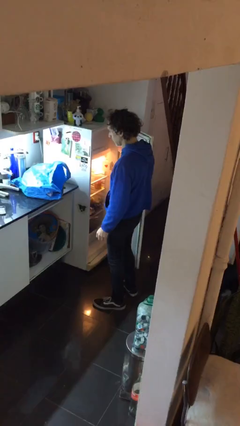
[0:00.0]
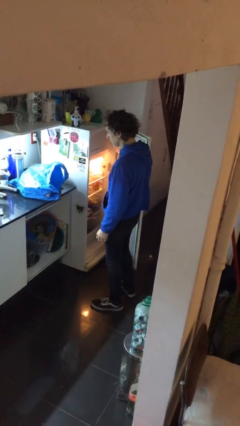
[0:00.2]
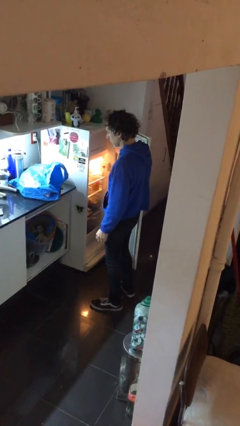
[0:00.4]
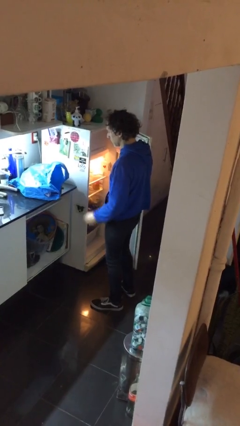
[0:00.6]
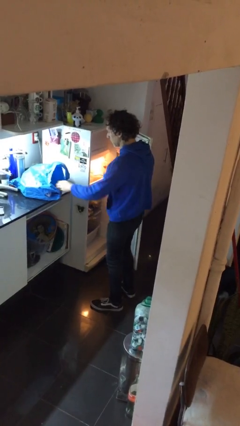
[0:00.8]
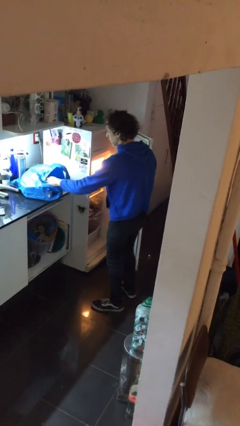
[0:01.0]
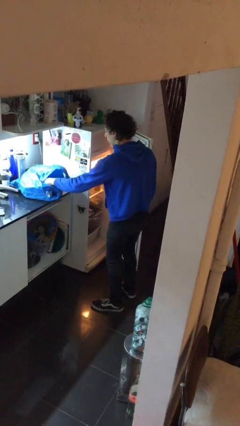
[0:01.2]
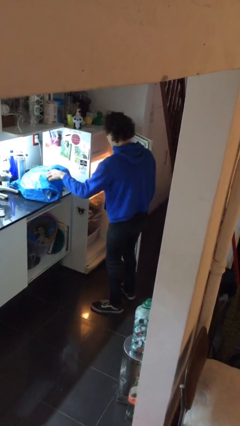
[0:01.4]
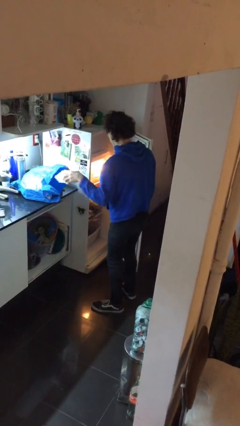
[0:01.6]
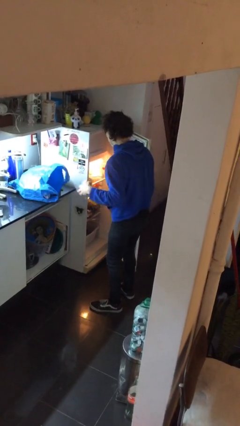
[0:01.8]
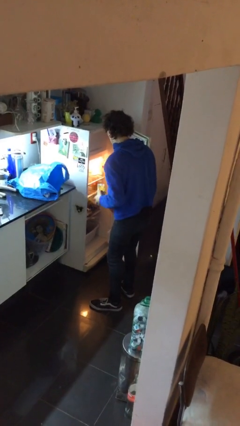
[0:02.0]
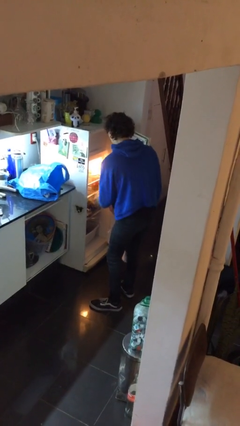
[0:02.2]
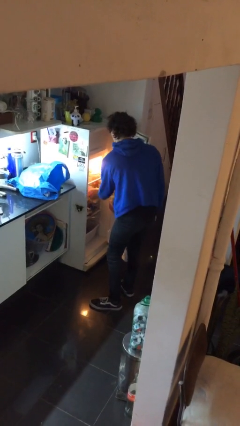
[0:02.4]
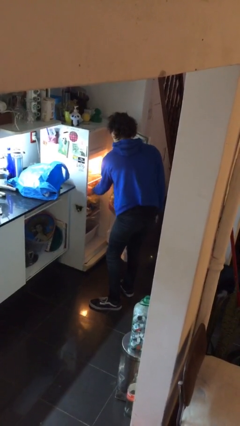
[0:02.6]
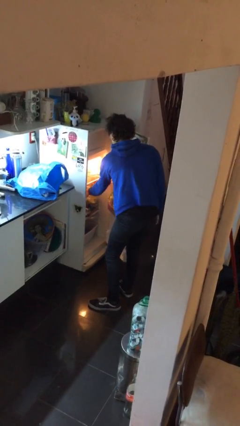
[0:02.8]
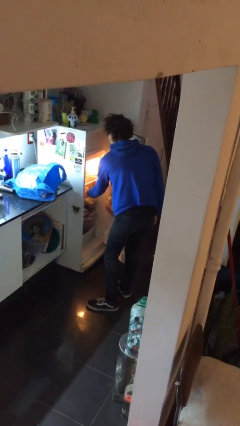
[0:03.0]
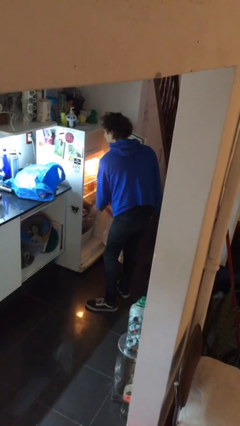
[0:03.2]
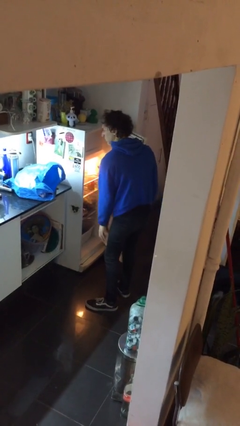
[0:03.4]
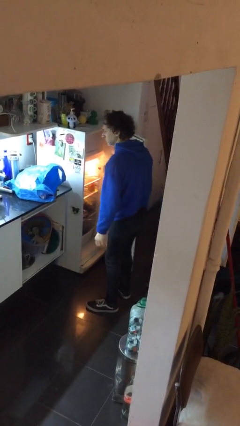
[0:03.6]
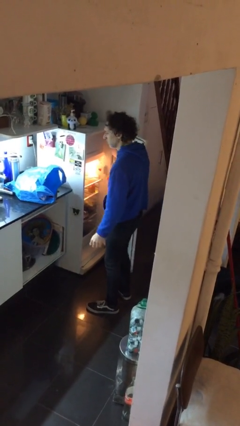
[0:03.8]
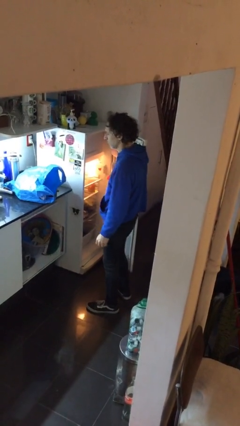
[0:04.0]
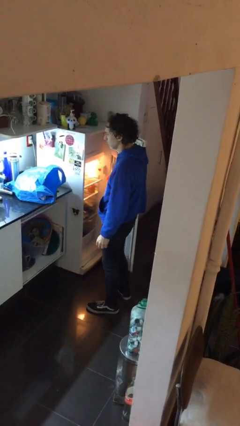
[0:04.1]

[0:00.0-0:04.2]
person loads groceries into refrigerator

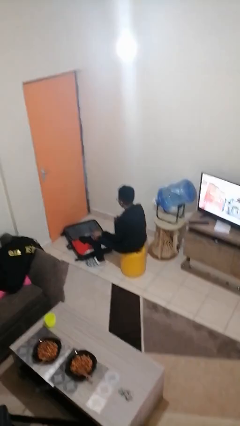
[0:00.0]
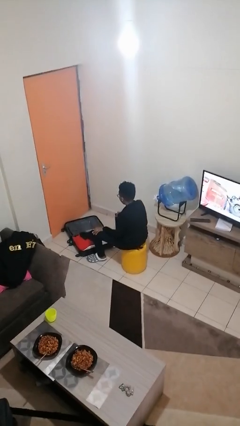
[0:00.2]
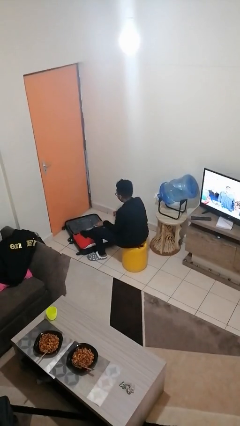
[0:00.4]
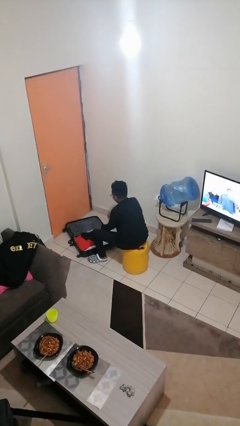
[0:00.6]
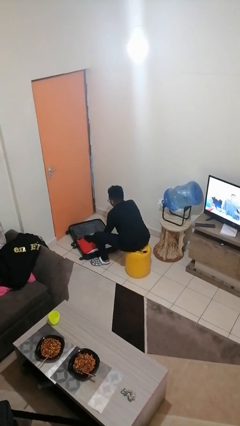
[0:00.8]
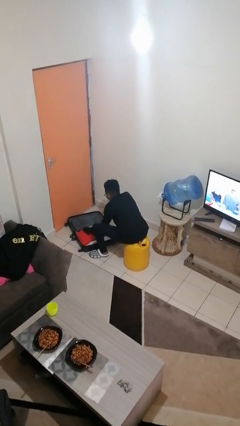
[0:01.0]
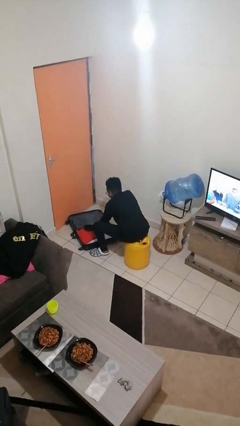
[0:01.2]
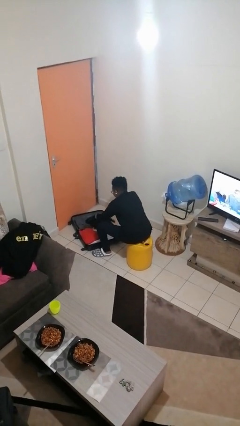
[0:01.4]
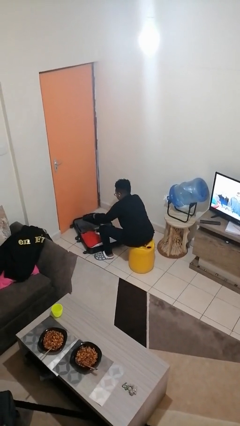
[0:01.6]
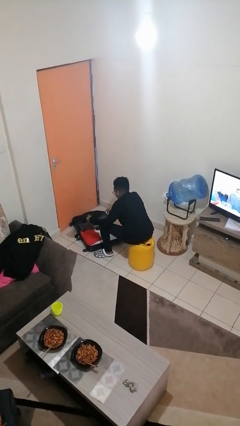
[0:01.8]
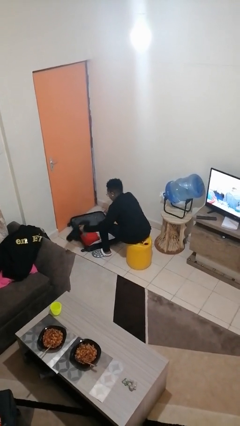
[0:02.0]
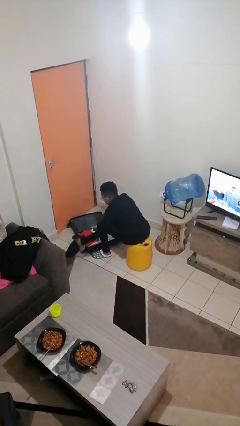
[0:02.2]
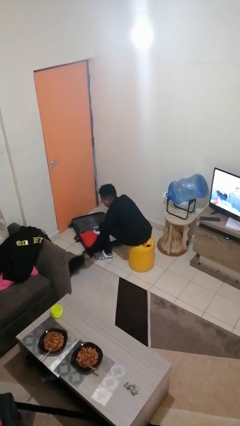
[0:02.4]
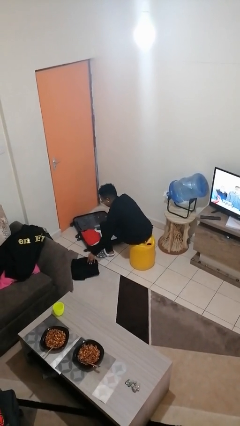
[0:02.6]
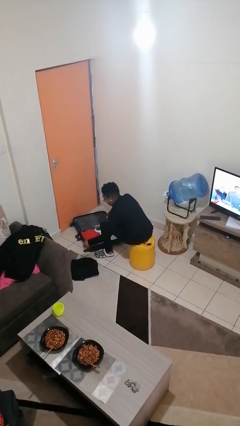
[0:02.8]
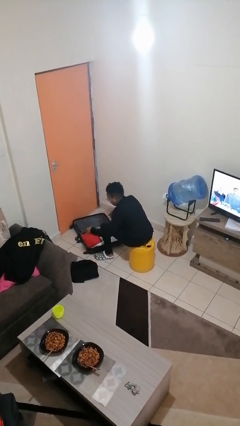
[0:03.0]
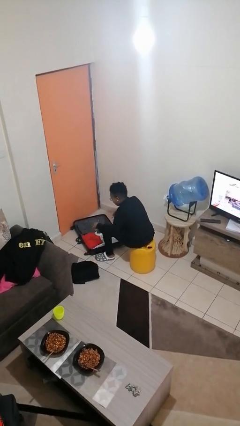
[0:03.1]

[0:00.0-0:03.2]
person unloads clothes from suitcase

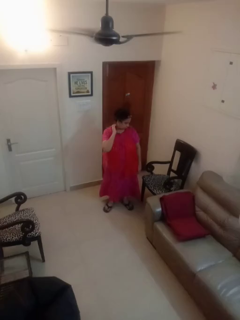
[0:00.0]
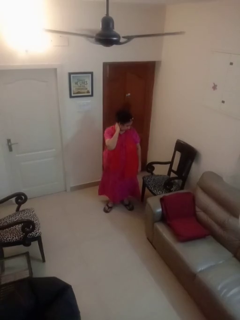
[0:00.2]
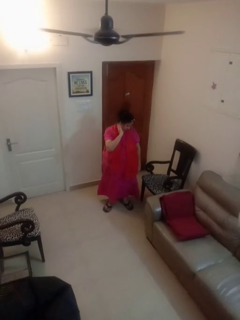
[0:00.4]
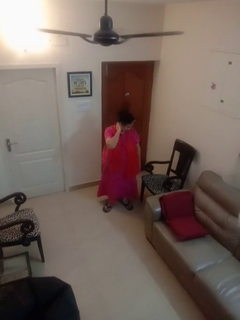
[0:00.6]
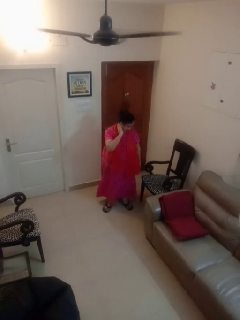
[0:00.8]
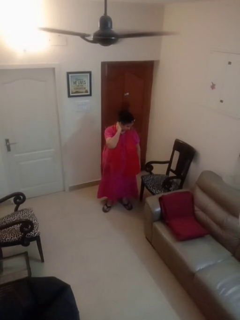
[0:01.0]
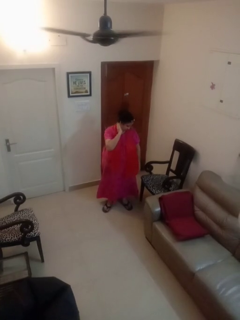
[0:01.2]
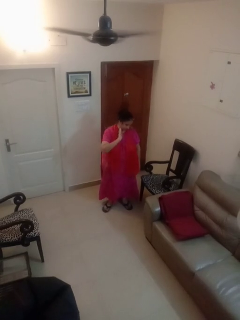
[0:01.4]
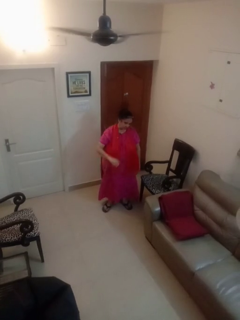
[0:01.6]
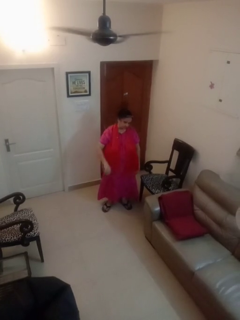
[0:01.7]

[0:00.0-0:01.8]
person rubs neck

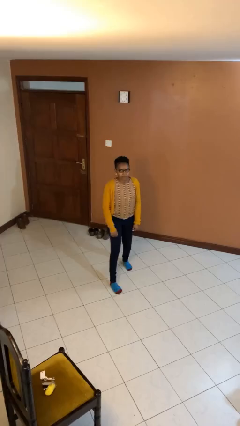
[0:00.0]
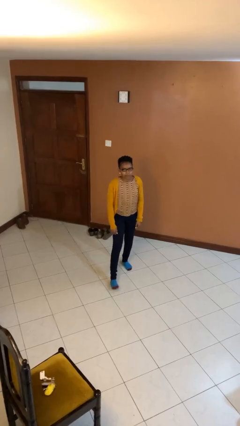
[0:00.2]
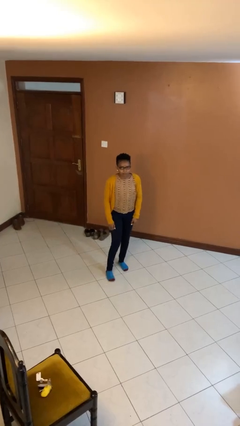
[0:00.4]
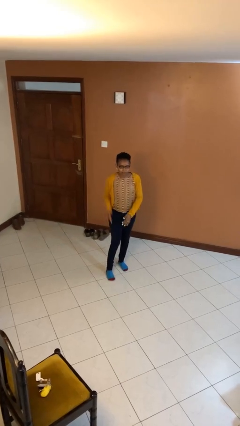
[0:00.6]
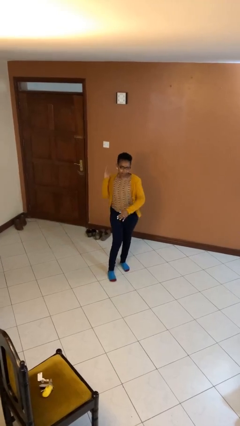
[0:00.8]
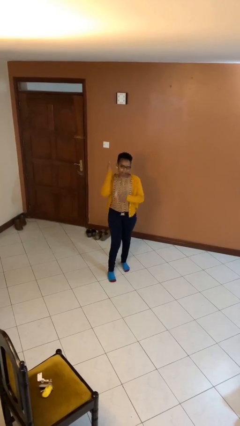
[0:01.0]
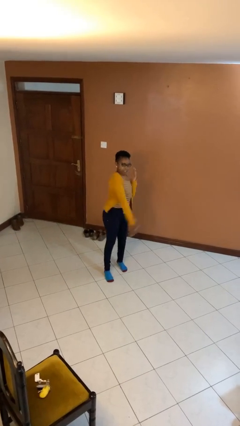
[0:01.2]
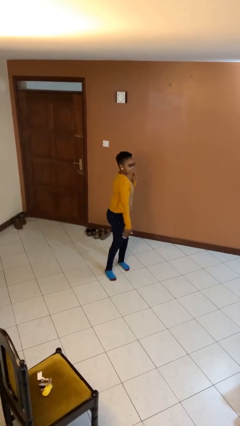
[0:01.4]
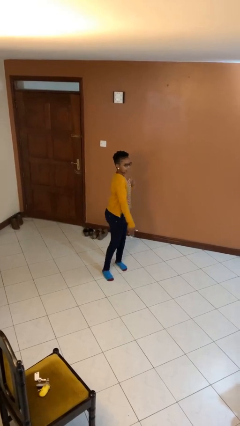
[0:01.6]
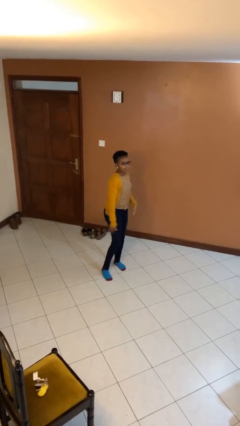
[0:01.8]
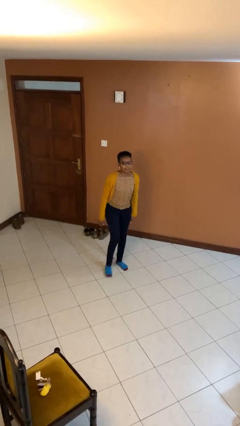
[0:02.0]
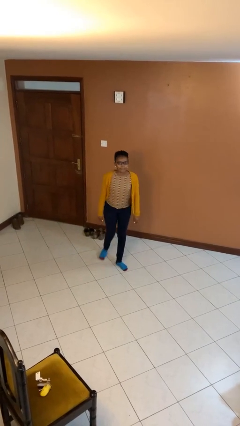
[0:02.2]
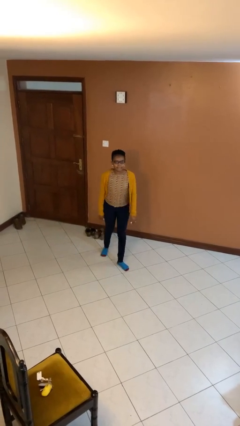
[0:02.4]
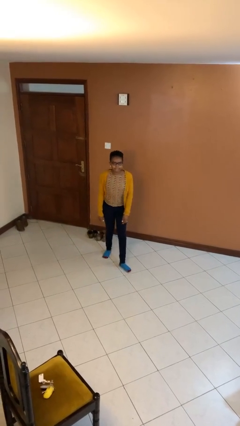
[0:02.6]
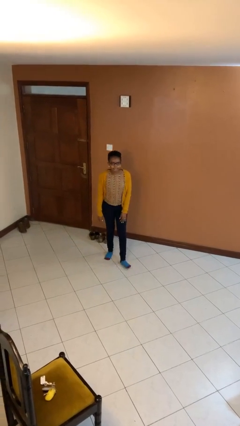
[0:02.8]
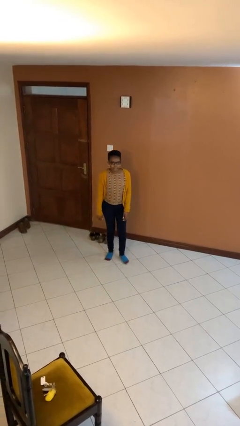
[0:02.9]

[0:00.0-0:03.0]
person karate chop

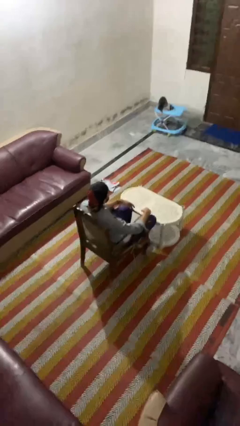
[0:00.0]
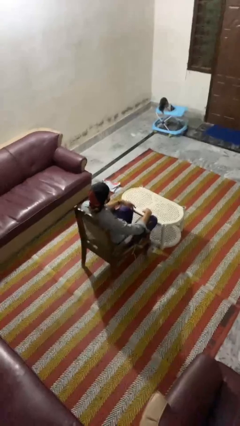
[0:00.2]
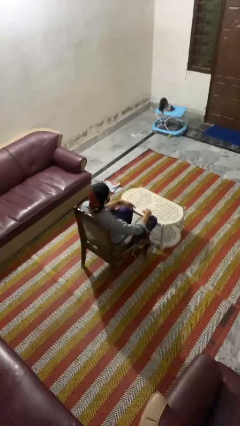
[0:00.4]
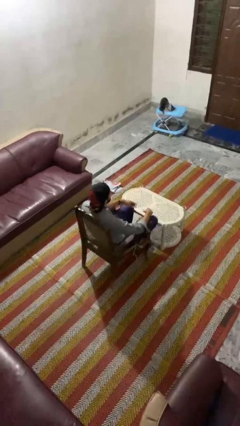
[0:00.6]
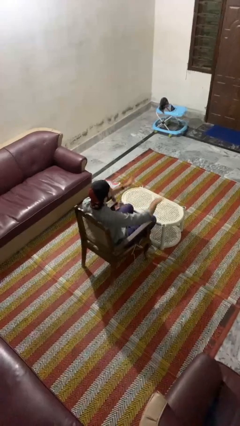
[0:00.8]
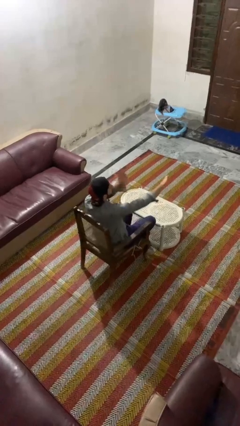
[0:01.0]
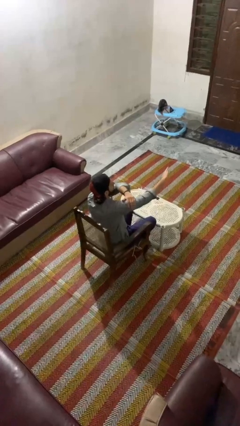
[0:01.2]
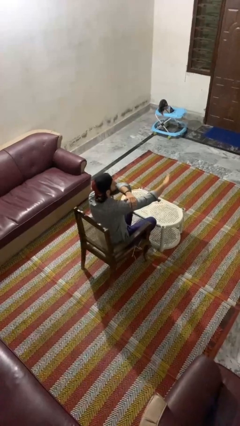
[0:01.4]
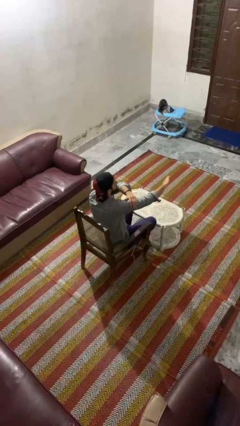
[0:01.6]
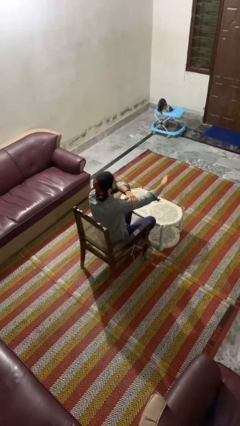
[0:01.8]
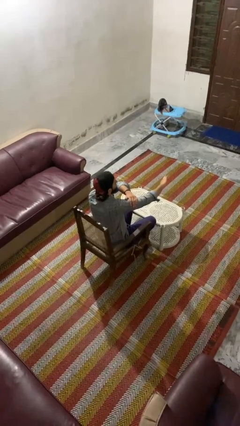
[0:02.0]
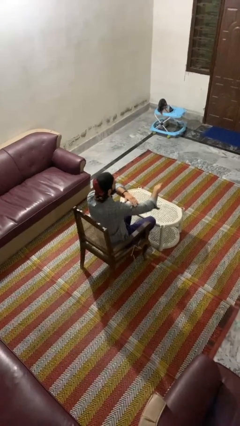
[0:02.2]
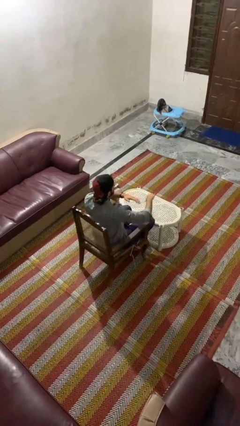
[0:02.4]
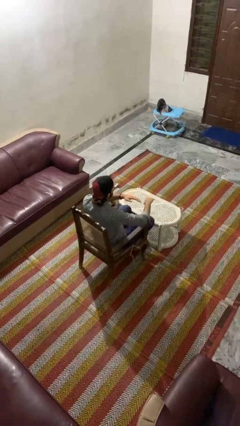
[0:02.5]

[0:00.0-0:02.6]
person swats bug

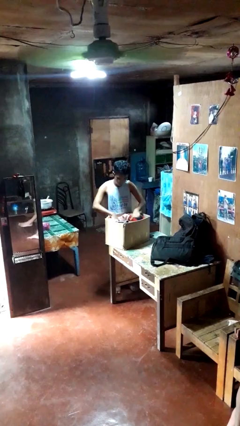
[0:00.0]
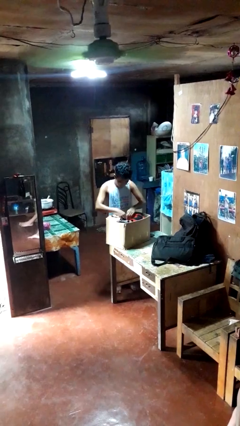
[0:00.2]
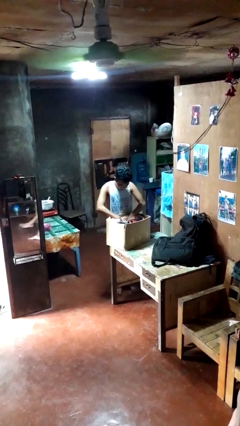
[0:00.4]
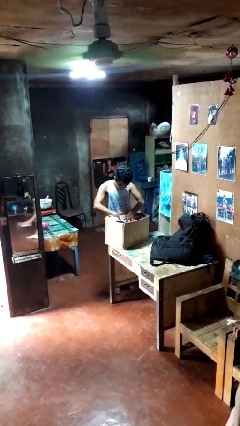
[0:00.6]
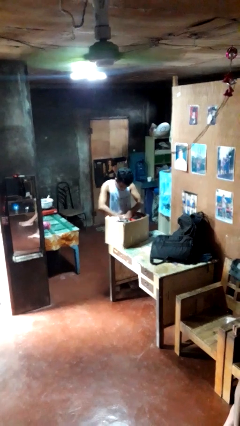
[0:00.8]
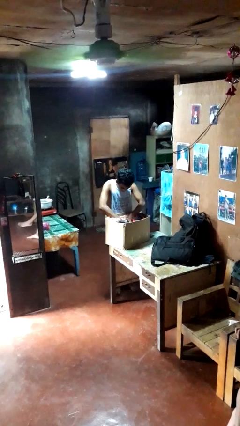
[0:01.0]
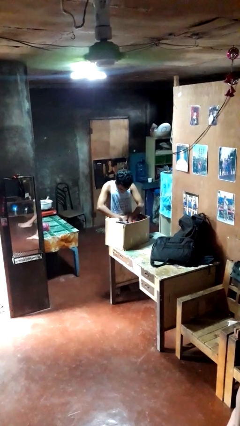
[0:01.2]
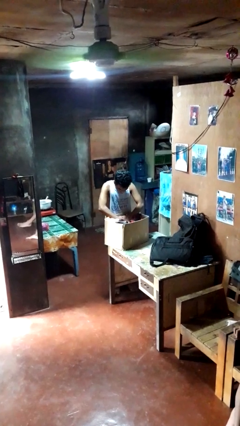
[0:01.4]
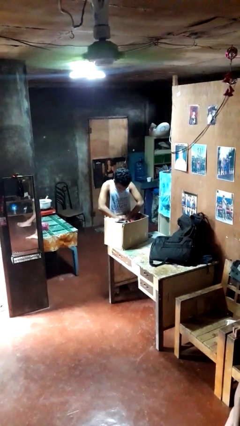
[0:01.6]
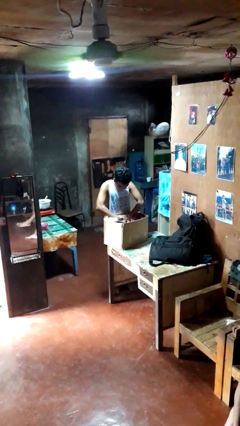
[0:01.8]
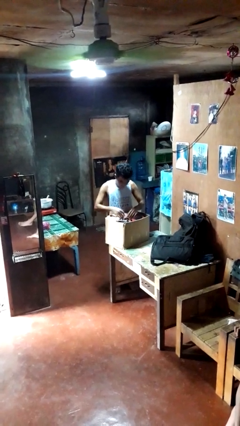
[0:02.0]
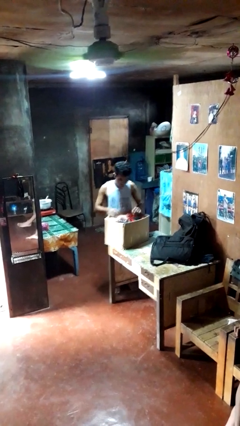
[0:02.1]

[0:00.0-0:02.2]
person searches in box

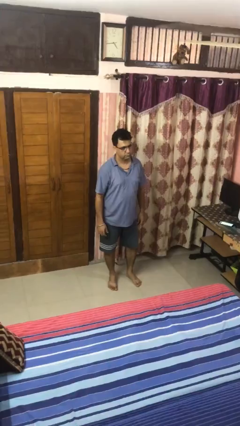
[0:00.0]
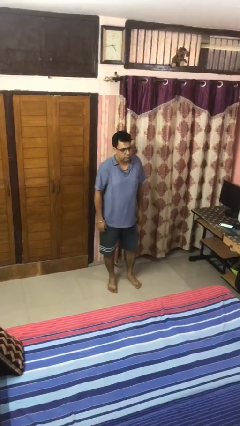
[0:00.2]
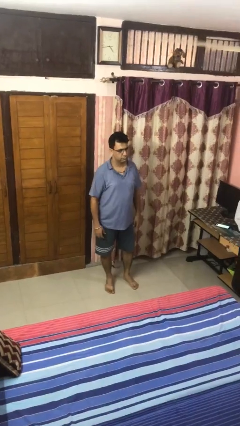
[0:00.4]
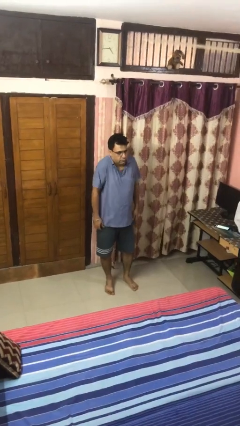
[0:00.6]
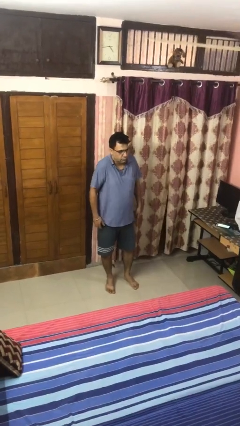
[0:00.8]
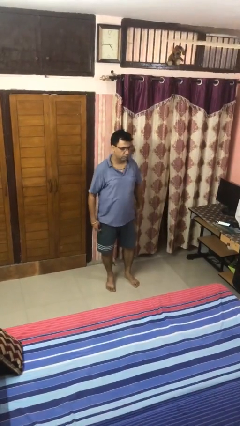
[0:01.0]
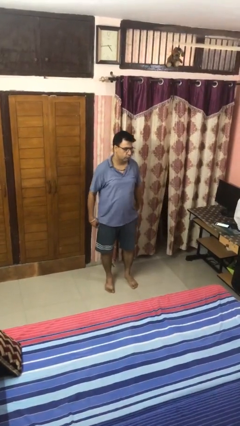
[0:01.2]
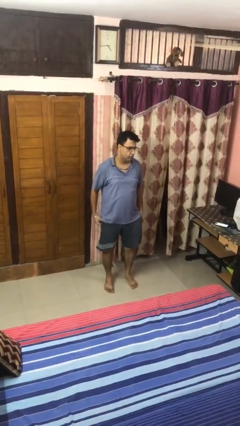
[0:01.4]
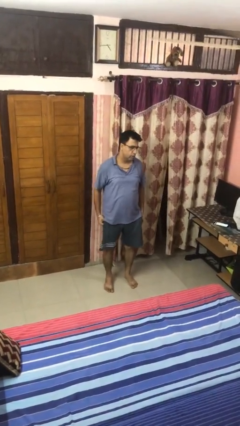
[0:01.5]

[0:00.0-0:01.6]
person shrugs
